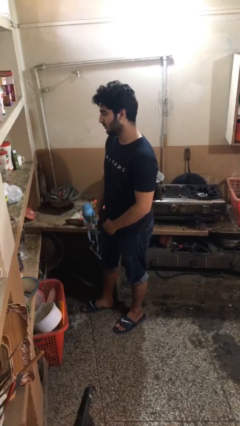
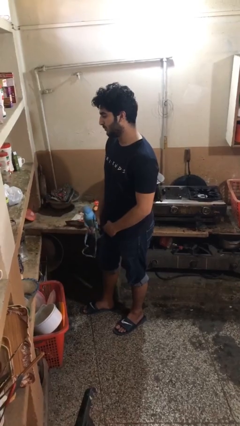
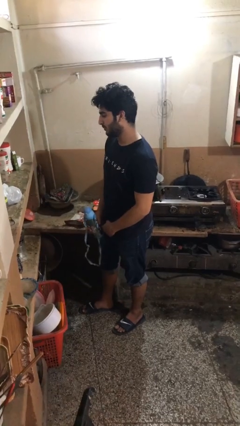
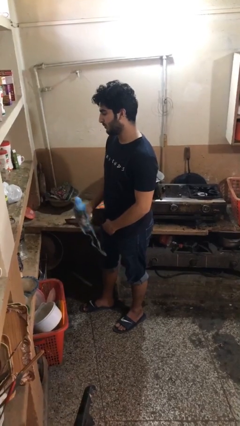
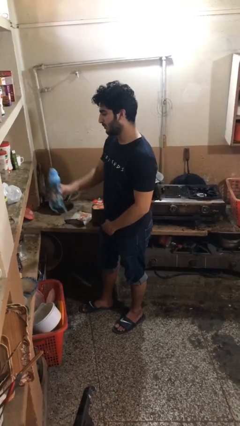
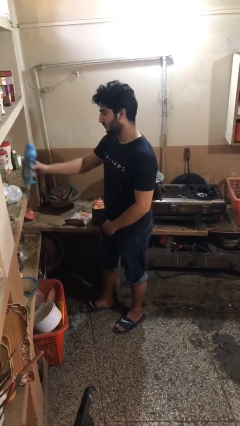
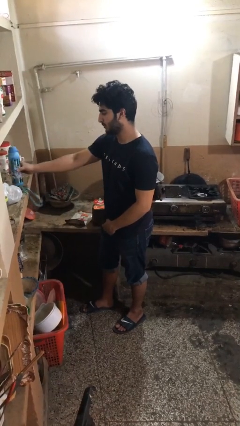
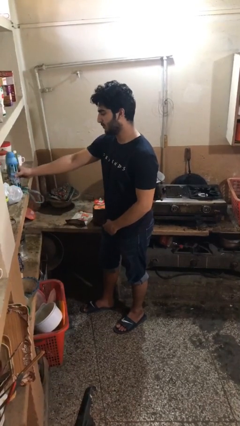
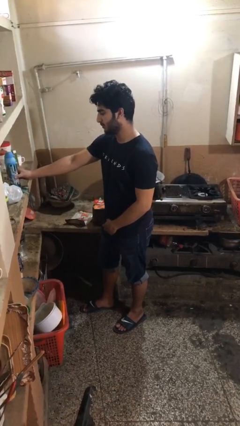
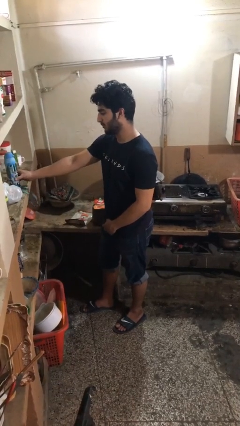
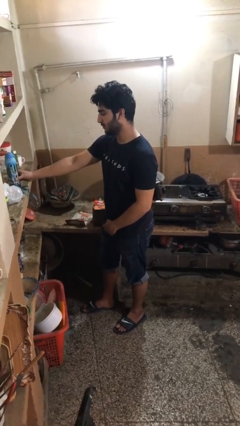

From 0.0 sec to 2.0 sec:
person puts down object on countertop

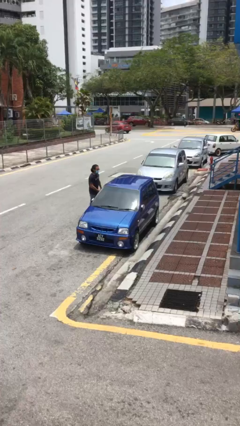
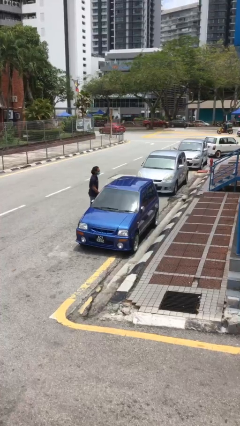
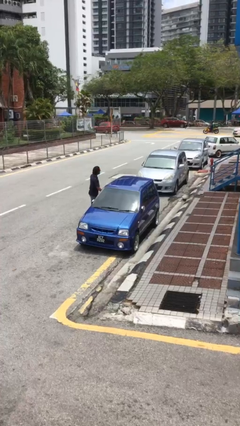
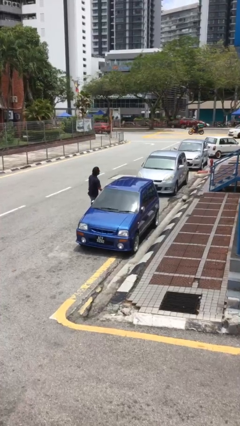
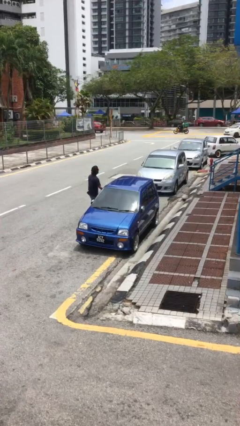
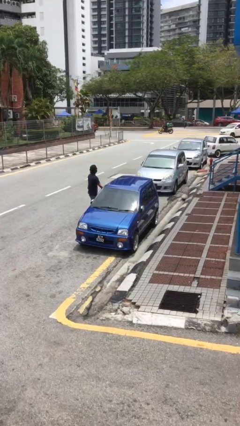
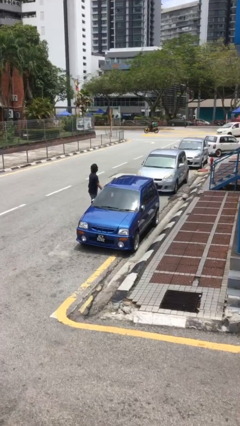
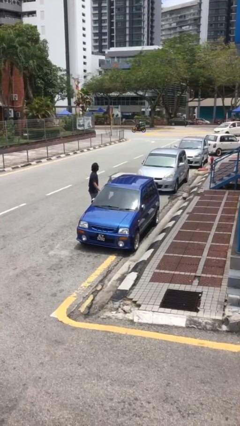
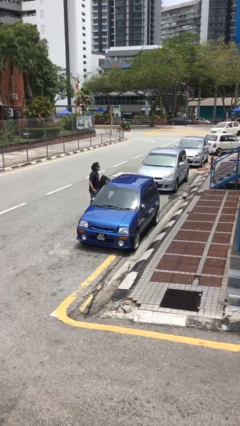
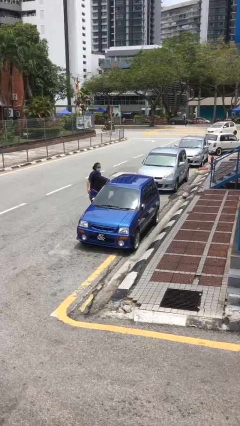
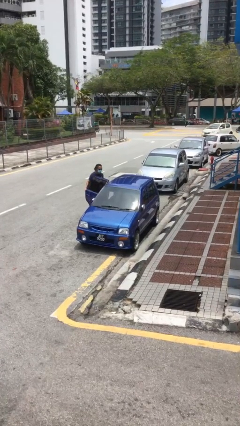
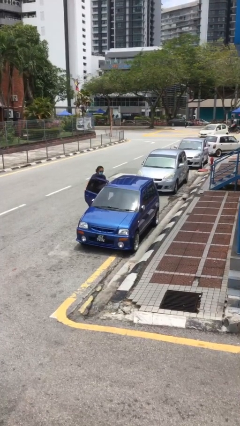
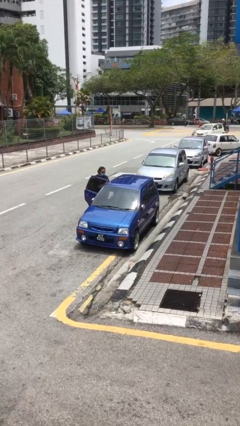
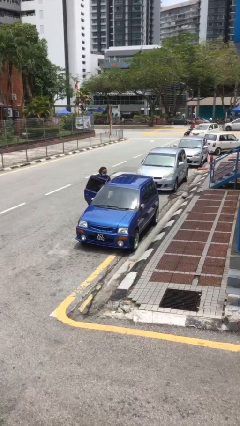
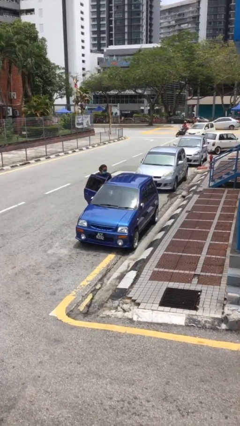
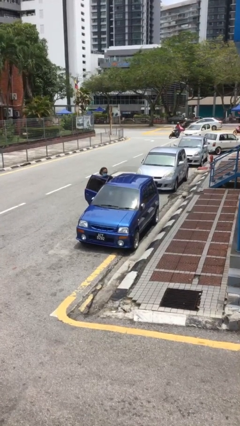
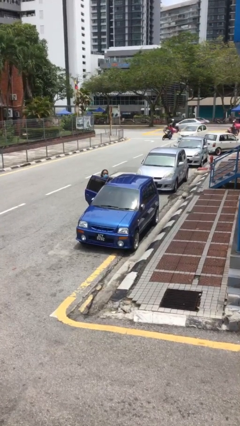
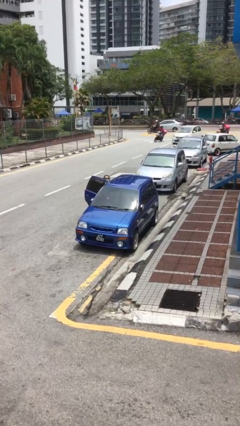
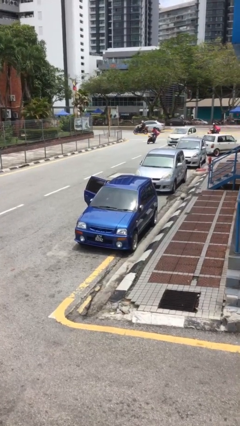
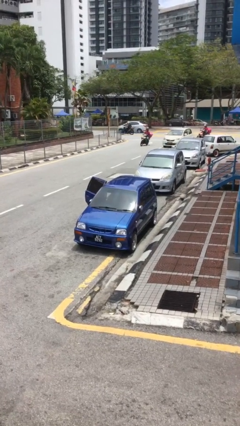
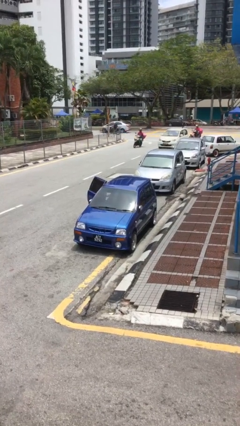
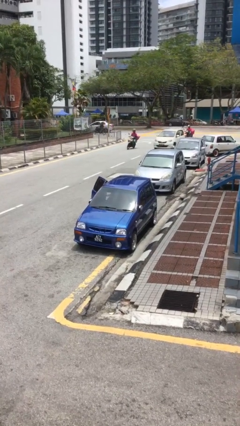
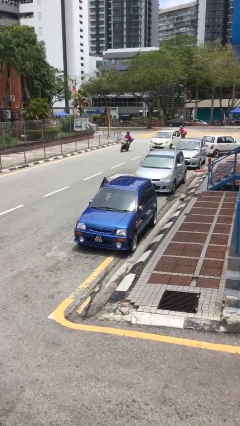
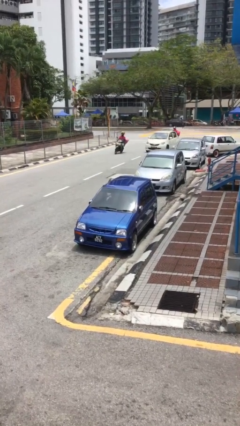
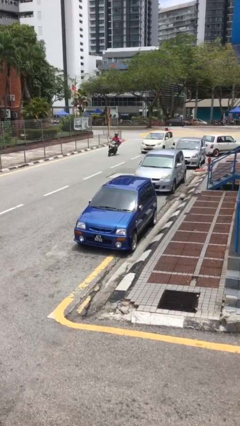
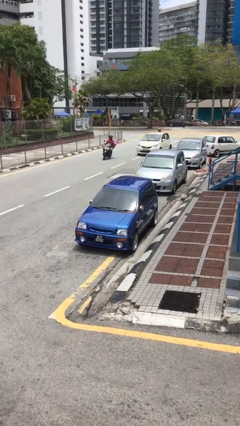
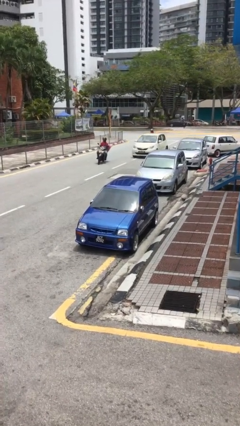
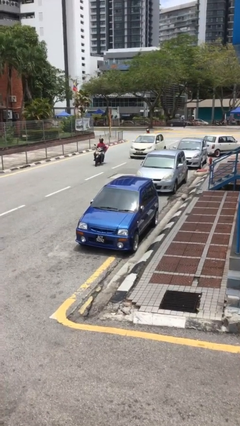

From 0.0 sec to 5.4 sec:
car picks up person

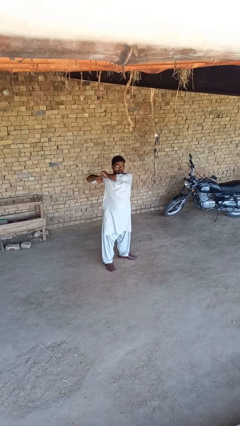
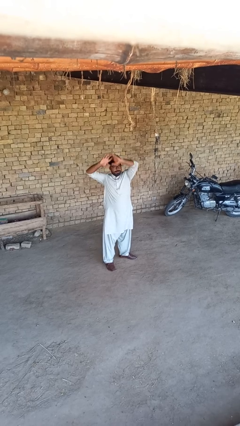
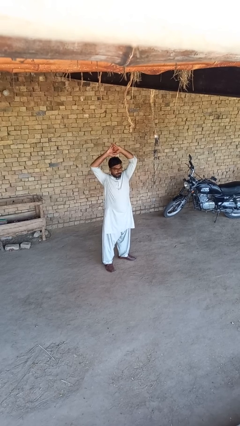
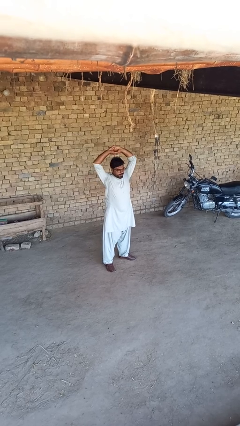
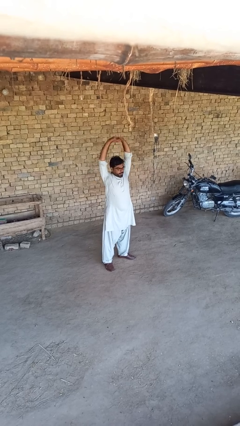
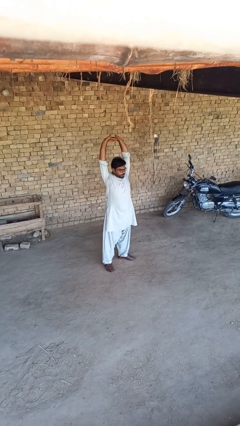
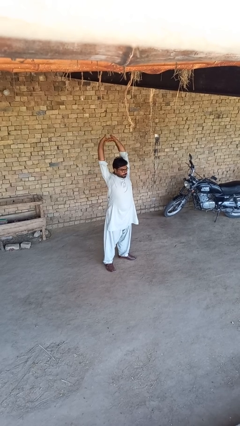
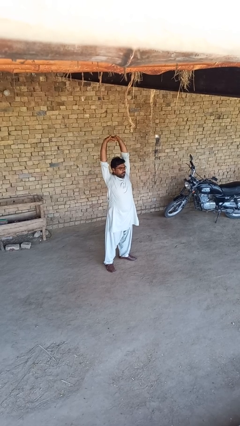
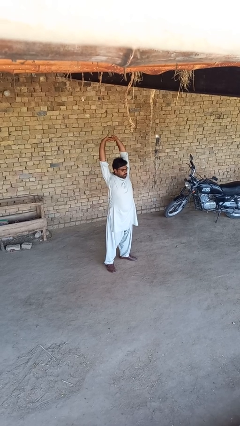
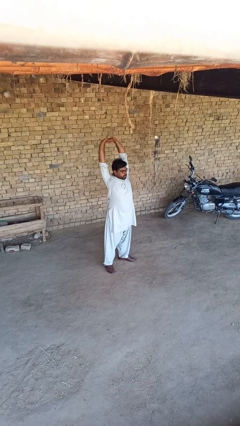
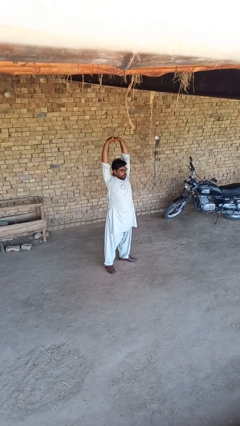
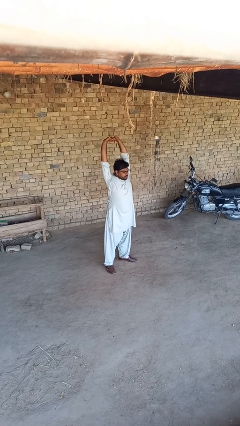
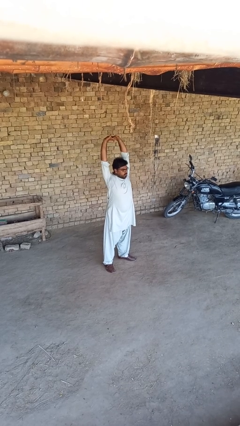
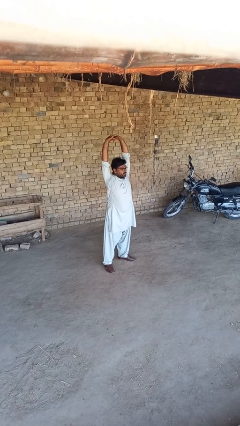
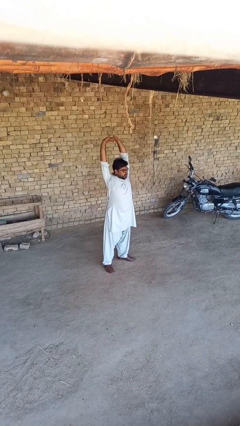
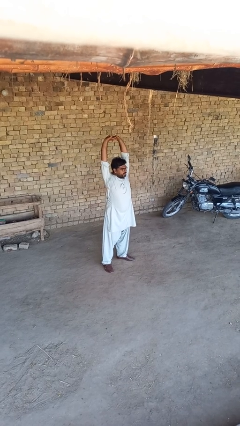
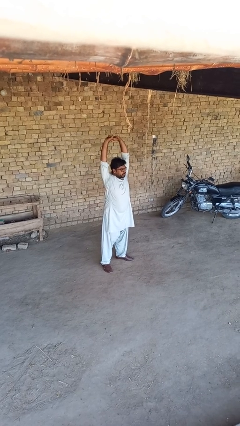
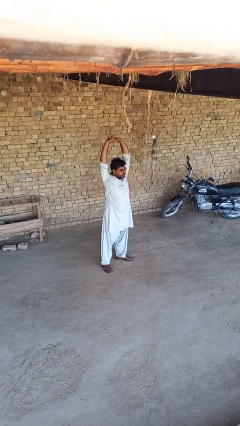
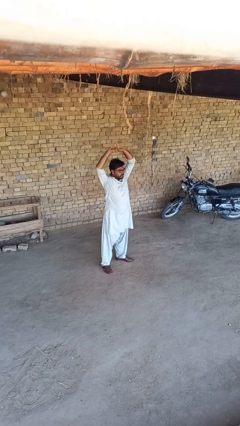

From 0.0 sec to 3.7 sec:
person stretches arms over head

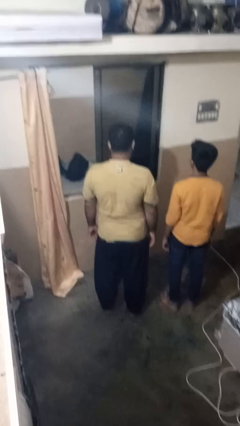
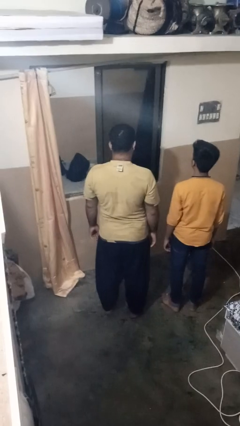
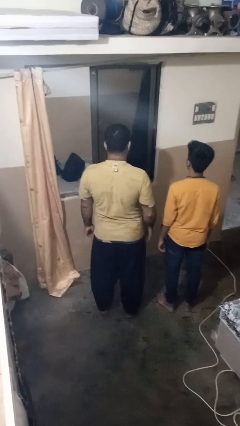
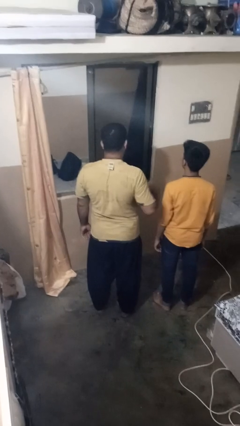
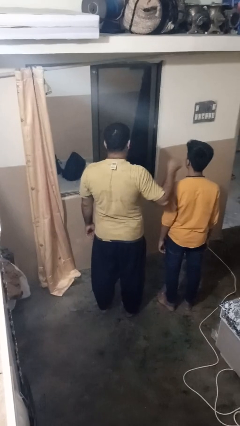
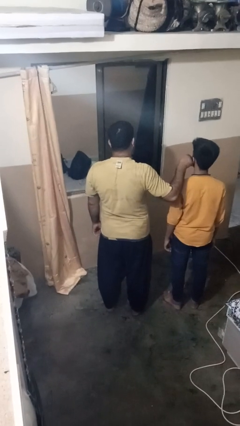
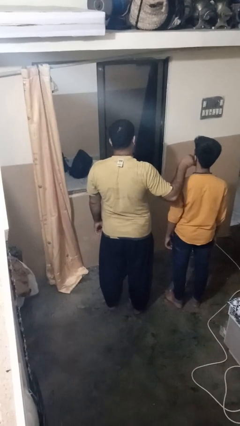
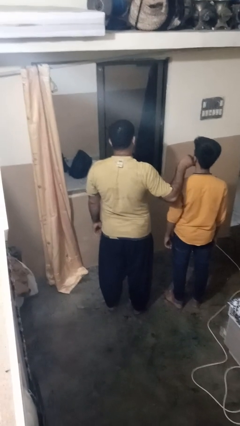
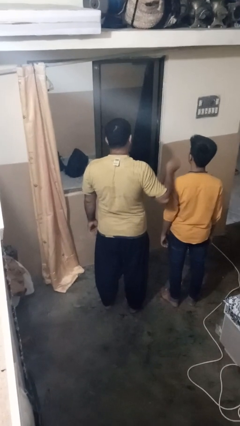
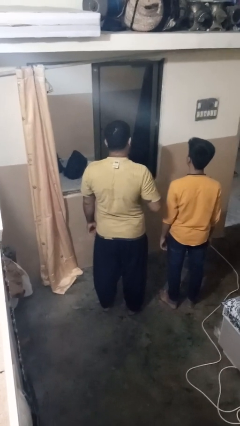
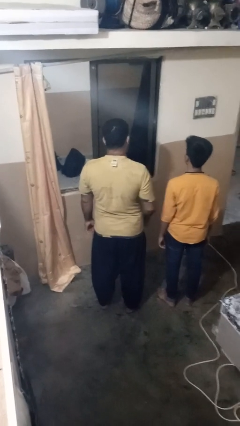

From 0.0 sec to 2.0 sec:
person touches face of person

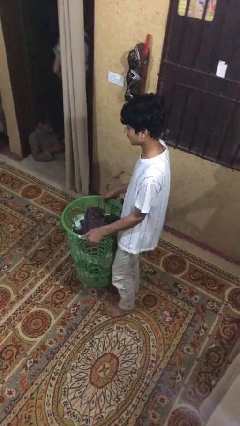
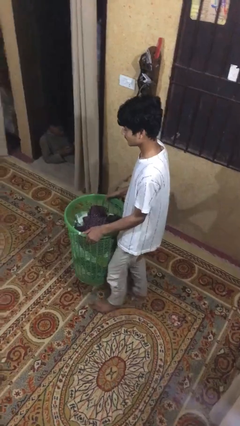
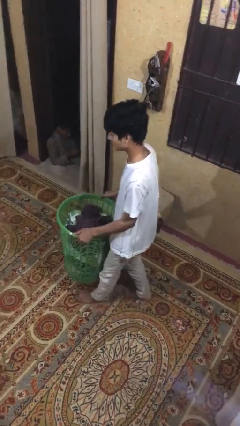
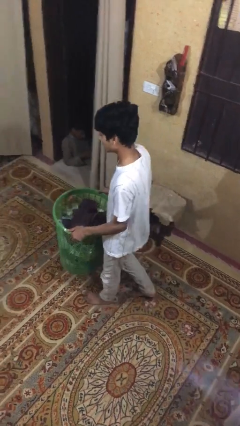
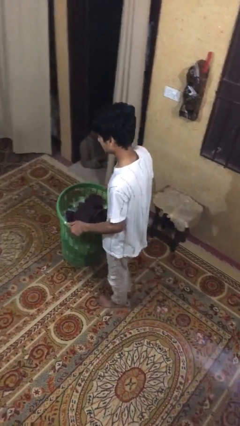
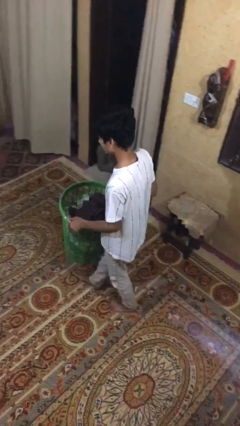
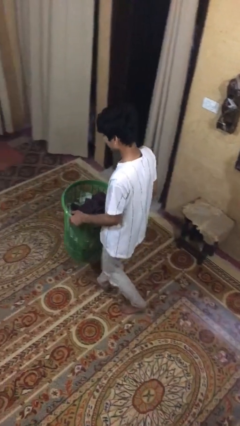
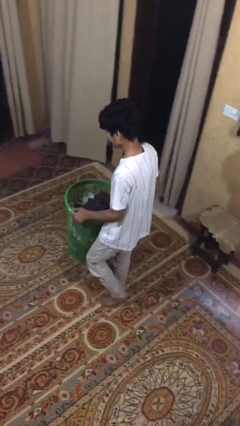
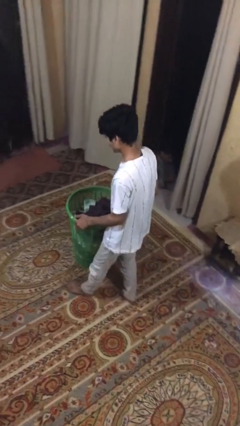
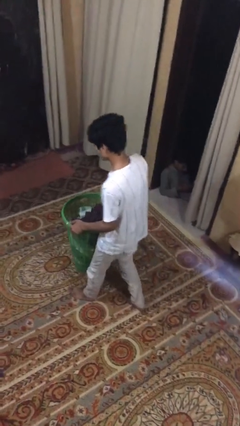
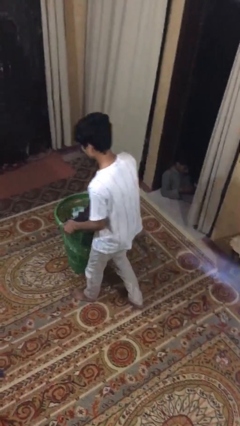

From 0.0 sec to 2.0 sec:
person carries heavy object

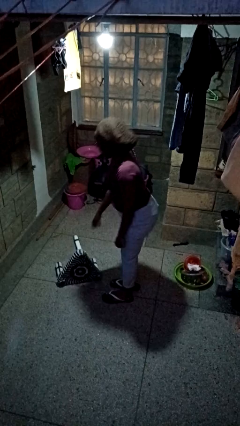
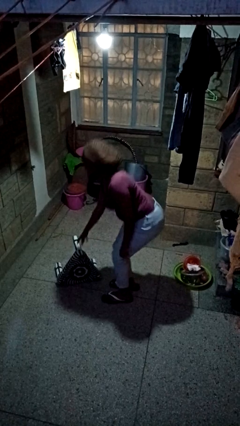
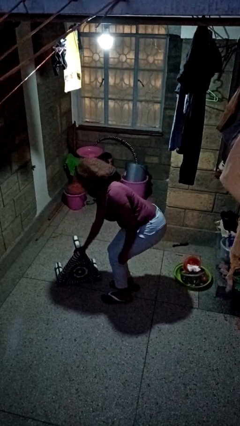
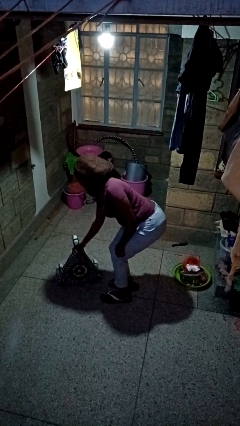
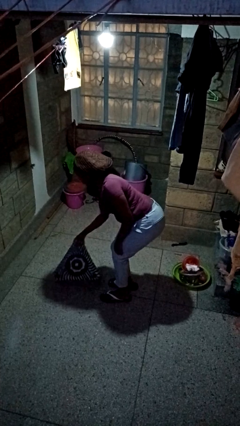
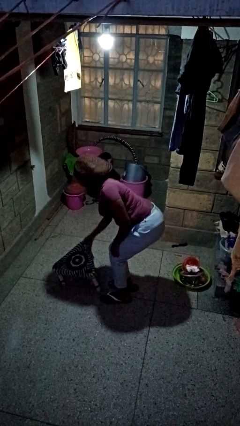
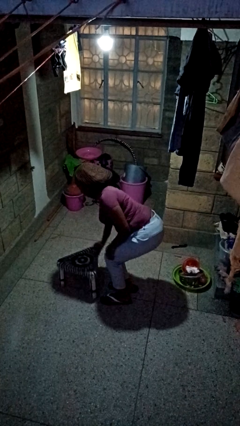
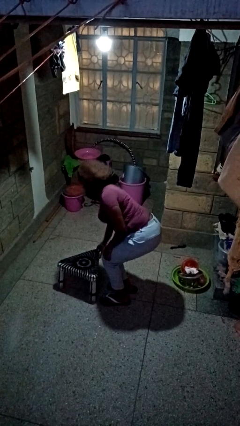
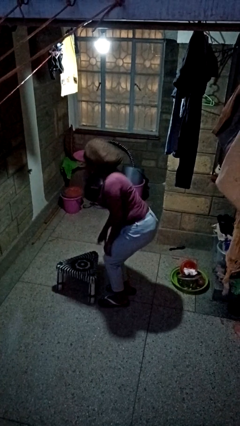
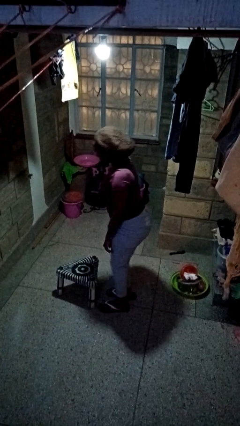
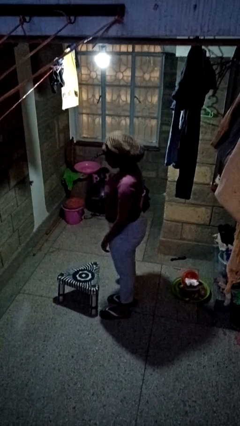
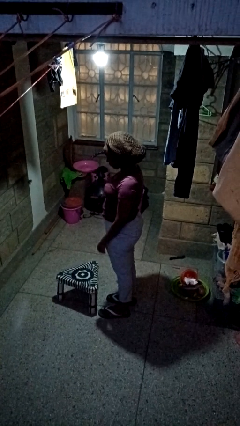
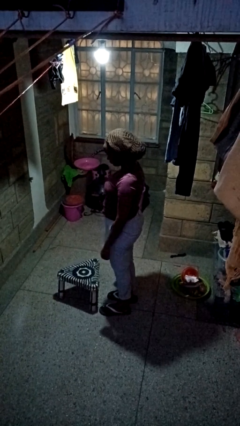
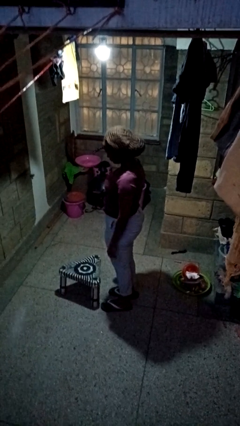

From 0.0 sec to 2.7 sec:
person sets upright furniture
